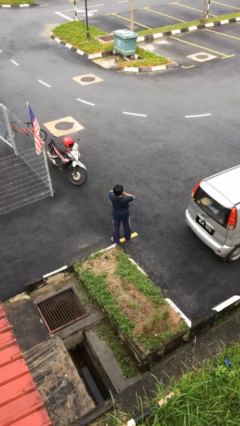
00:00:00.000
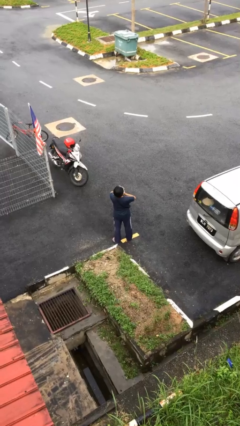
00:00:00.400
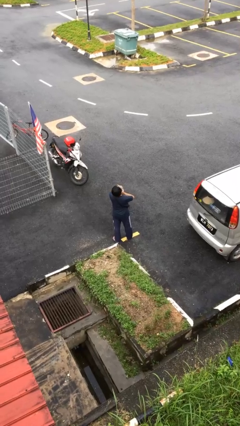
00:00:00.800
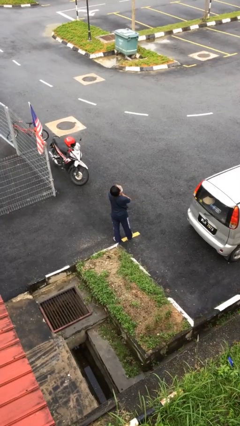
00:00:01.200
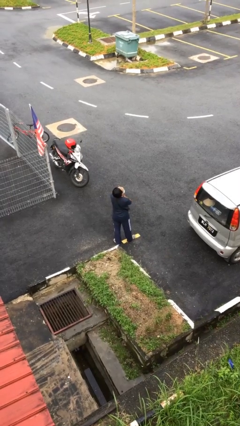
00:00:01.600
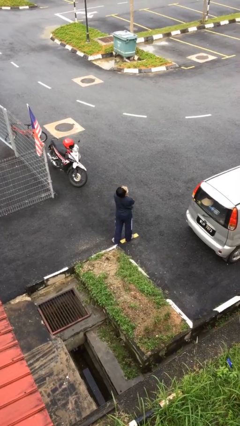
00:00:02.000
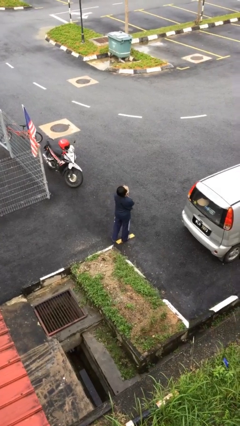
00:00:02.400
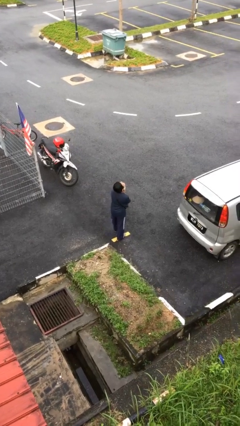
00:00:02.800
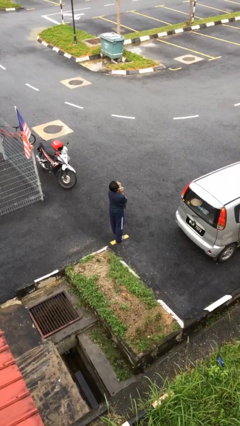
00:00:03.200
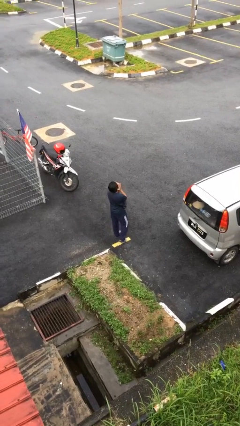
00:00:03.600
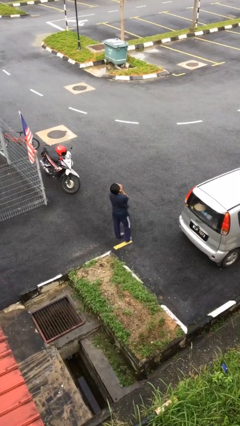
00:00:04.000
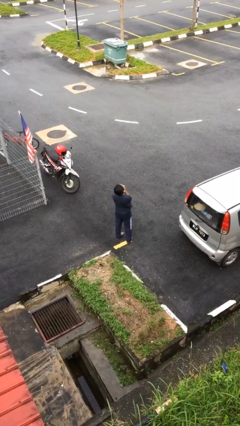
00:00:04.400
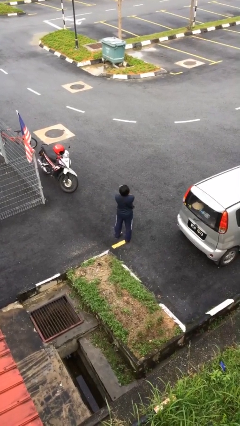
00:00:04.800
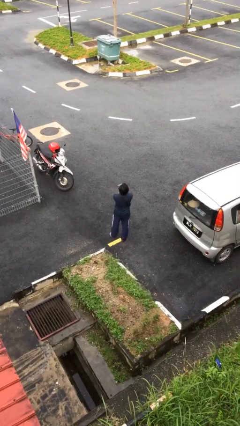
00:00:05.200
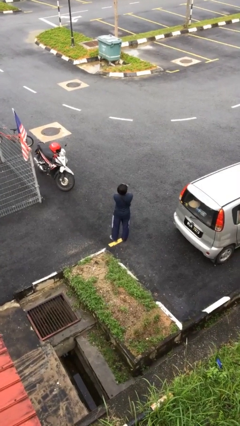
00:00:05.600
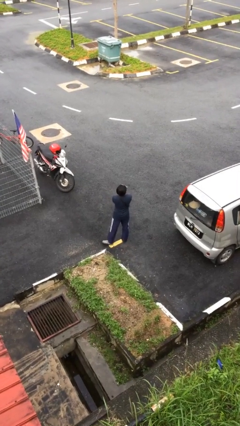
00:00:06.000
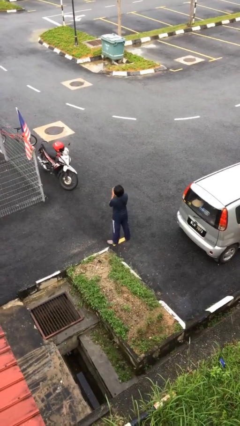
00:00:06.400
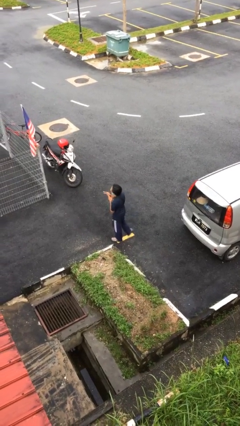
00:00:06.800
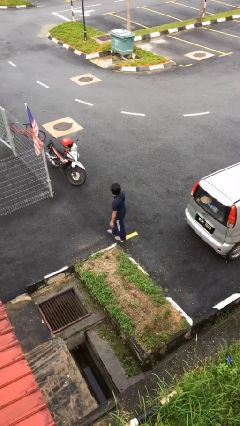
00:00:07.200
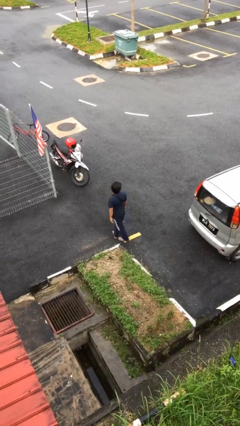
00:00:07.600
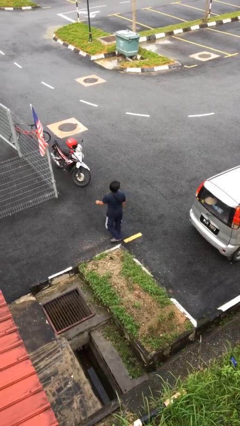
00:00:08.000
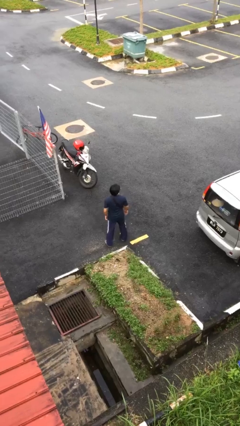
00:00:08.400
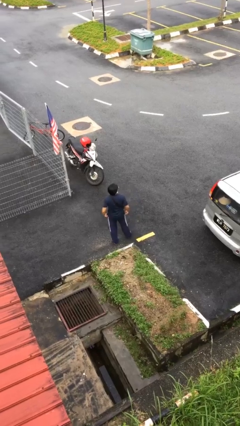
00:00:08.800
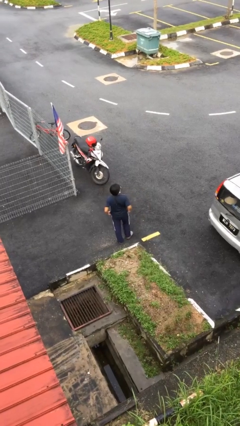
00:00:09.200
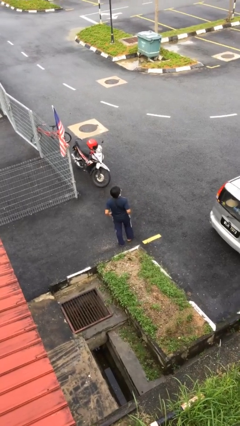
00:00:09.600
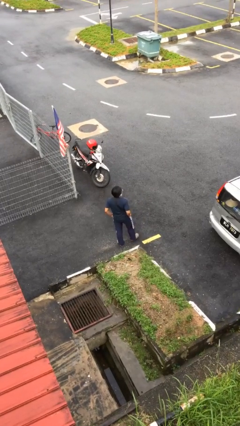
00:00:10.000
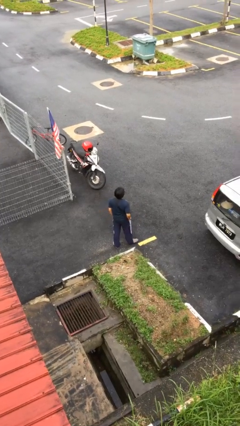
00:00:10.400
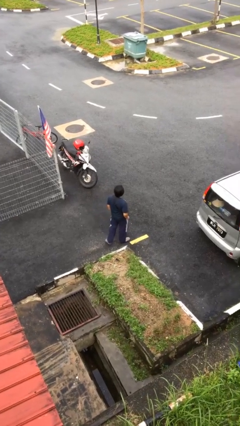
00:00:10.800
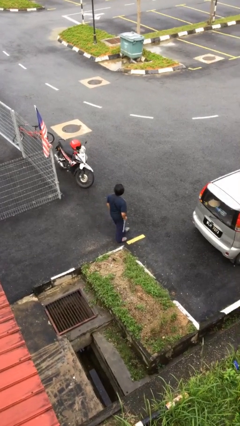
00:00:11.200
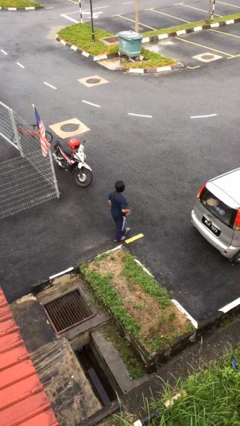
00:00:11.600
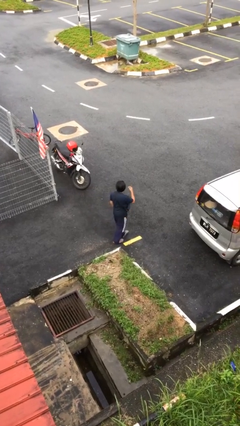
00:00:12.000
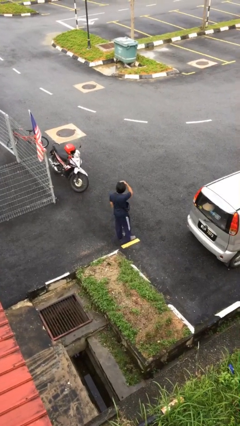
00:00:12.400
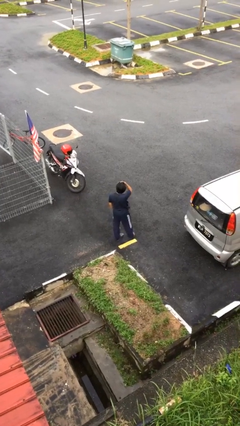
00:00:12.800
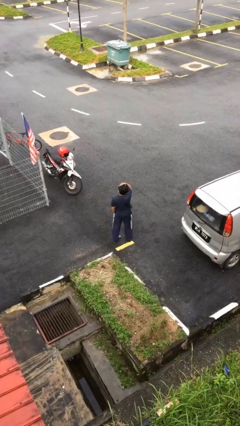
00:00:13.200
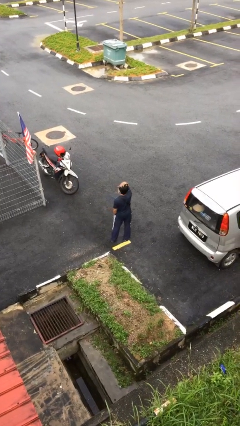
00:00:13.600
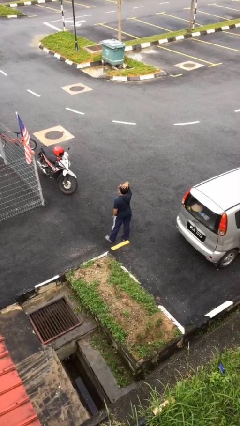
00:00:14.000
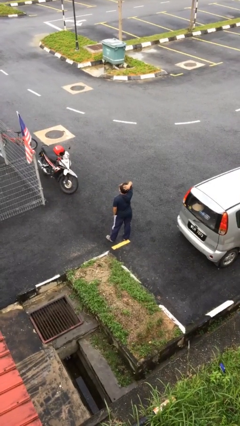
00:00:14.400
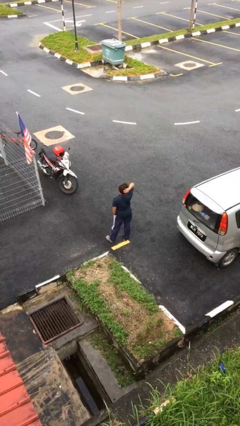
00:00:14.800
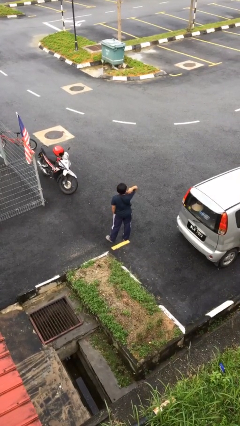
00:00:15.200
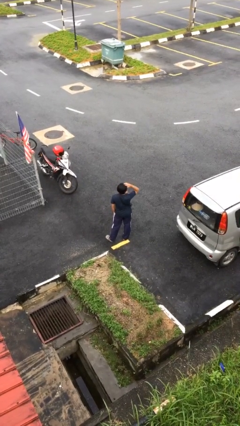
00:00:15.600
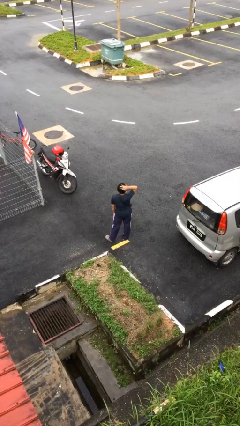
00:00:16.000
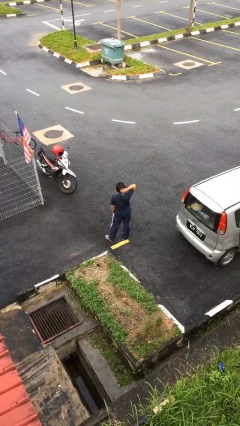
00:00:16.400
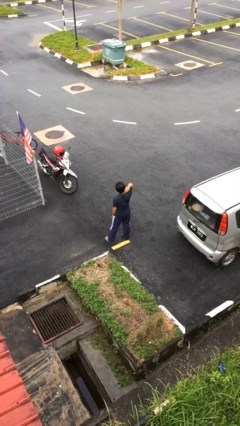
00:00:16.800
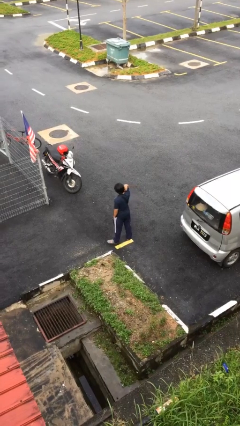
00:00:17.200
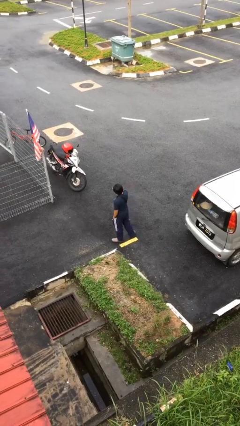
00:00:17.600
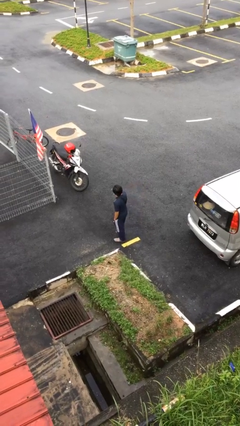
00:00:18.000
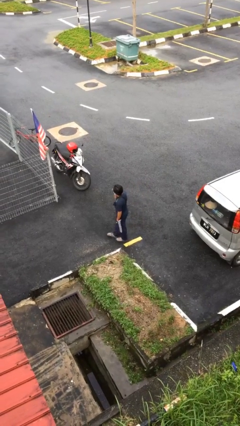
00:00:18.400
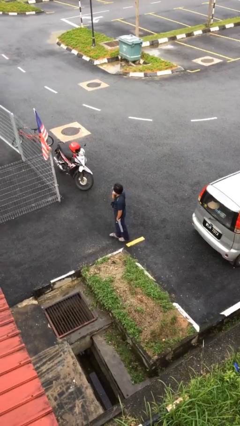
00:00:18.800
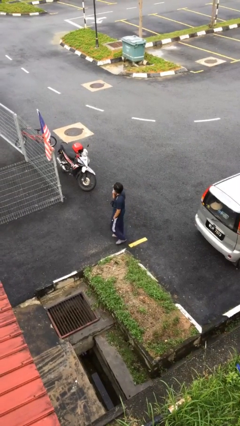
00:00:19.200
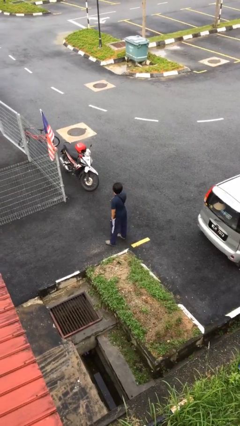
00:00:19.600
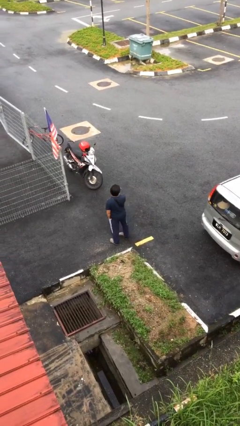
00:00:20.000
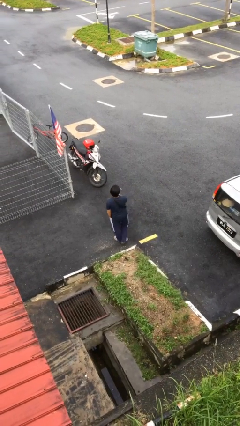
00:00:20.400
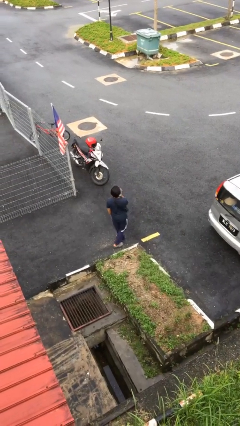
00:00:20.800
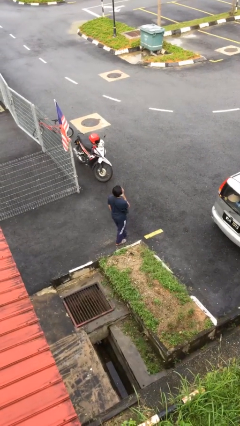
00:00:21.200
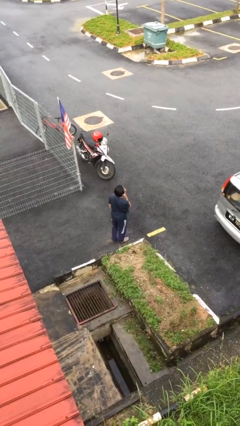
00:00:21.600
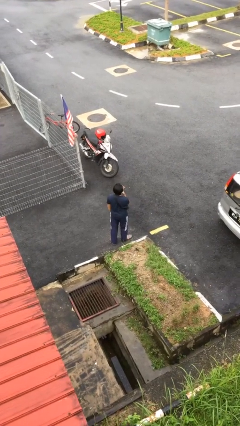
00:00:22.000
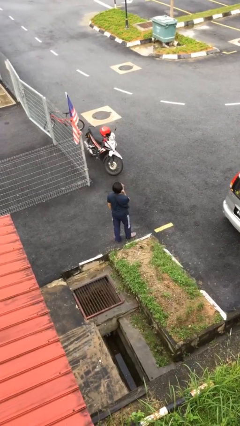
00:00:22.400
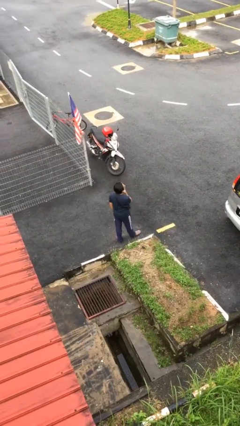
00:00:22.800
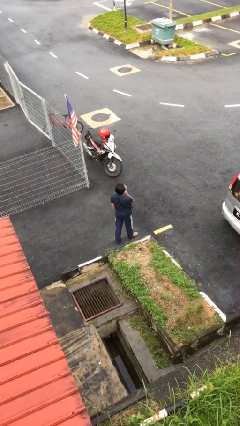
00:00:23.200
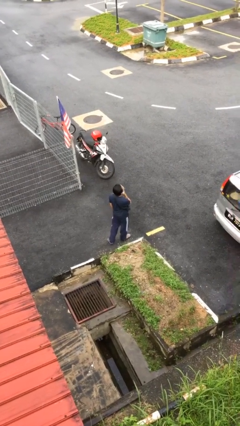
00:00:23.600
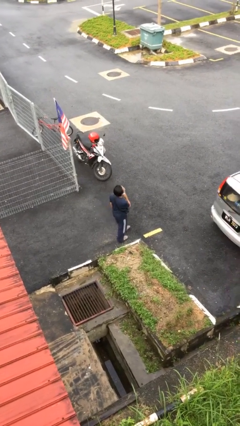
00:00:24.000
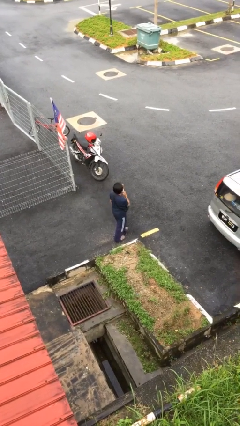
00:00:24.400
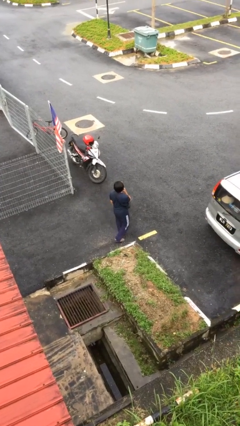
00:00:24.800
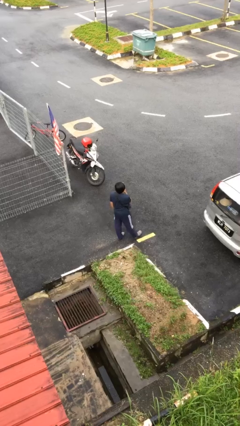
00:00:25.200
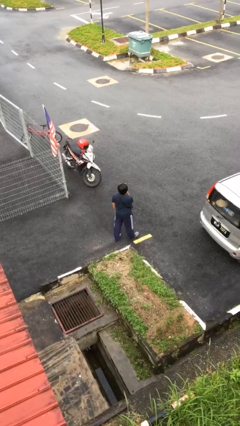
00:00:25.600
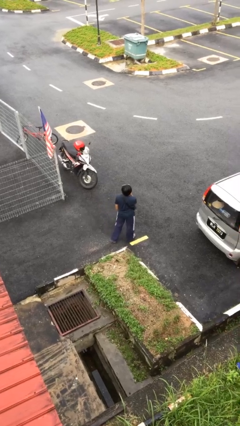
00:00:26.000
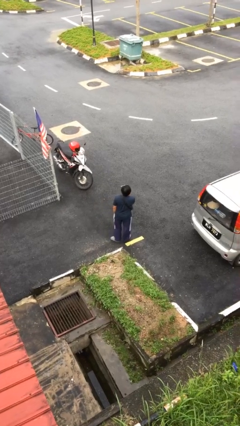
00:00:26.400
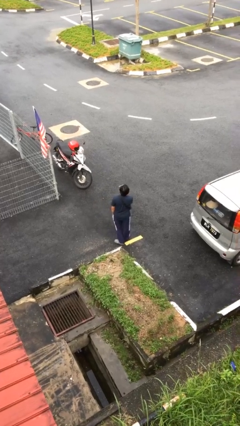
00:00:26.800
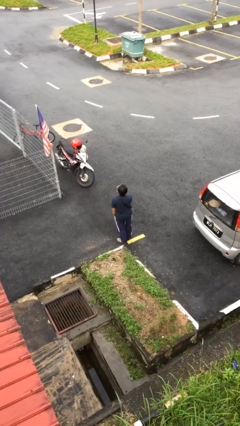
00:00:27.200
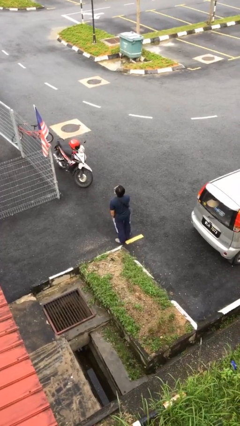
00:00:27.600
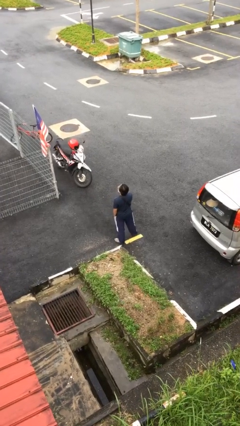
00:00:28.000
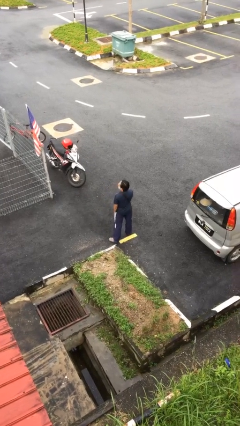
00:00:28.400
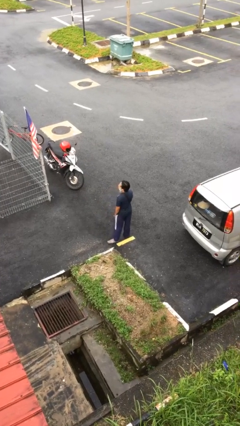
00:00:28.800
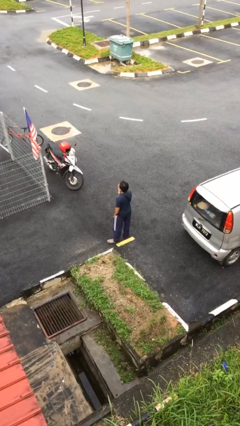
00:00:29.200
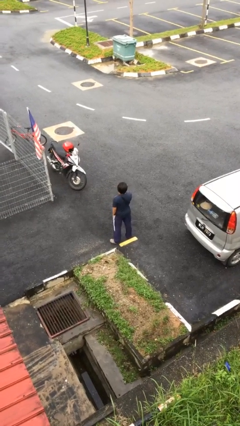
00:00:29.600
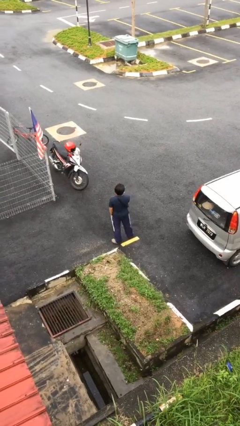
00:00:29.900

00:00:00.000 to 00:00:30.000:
person walks

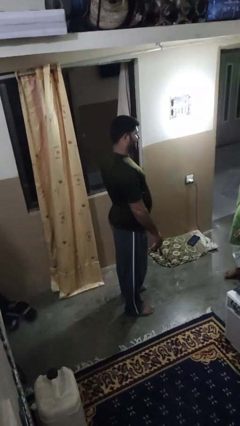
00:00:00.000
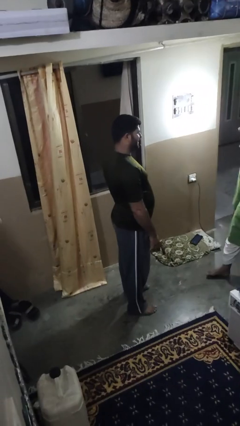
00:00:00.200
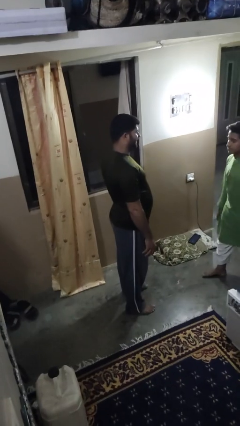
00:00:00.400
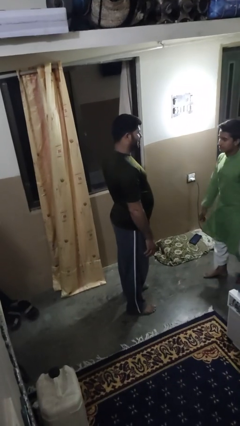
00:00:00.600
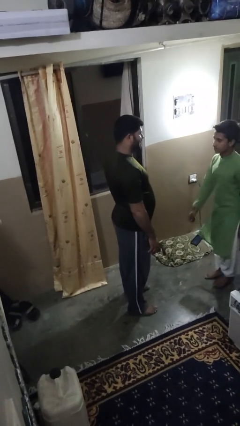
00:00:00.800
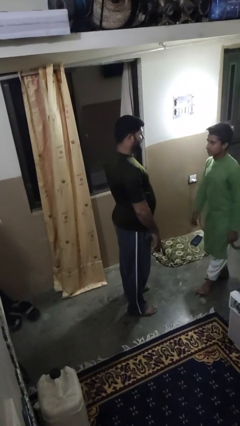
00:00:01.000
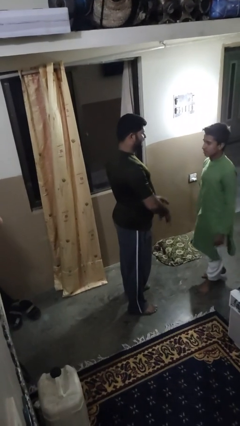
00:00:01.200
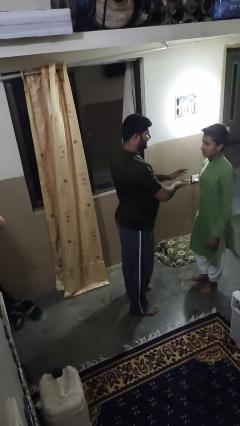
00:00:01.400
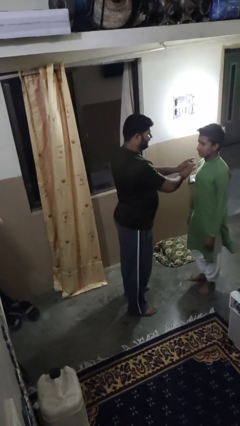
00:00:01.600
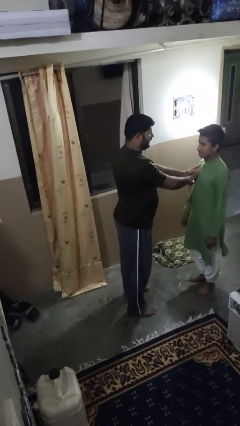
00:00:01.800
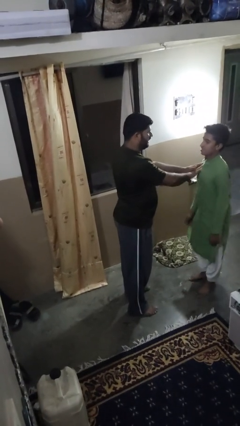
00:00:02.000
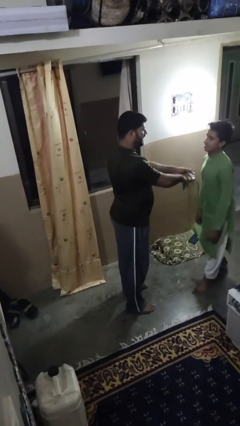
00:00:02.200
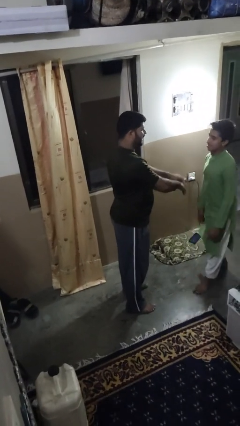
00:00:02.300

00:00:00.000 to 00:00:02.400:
person shoves person

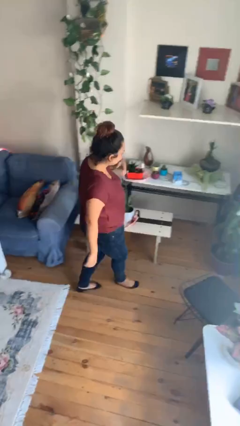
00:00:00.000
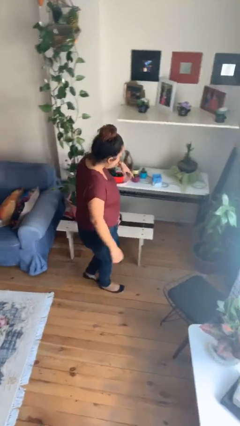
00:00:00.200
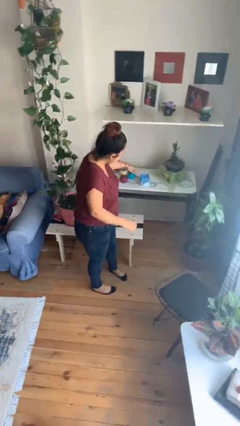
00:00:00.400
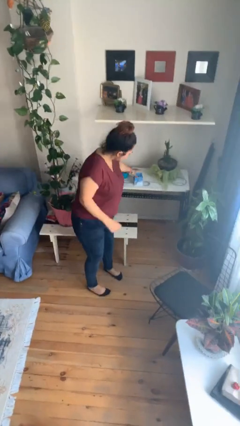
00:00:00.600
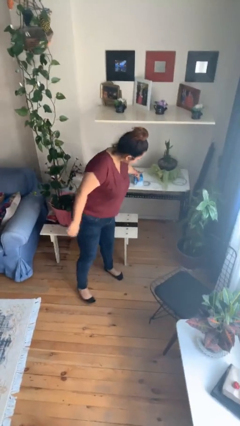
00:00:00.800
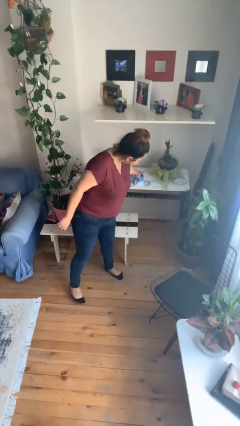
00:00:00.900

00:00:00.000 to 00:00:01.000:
person picks up object from table
